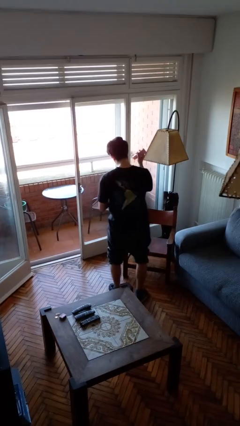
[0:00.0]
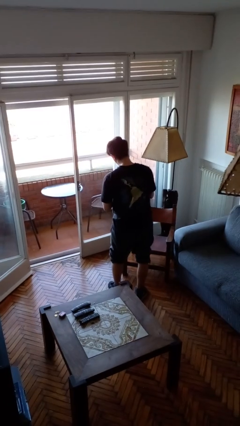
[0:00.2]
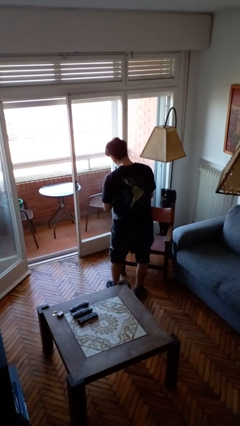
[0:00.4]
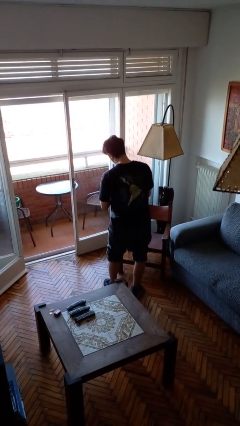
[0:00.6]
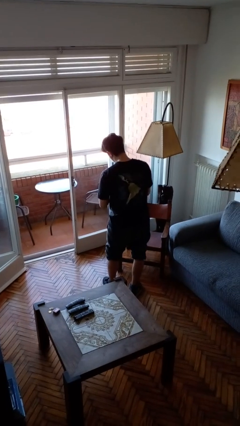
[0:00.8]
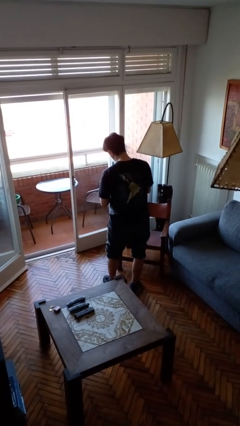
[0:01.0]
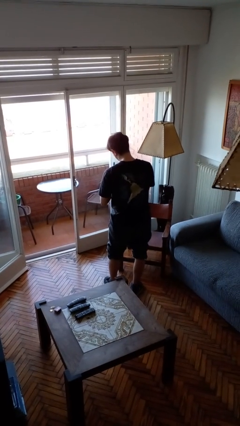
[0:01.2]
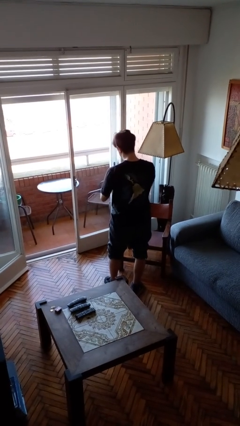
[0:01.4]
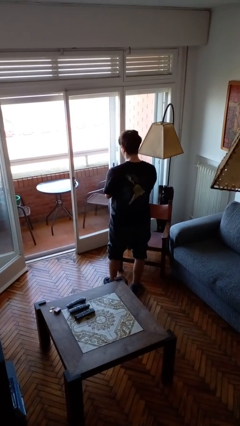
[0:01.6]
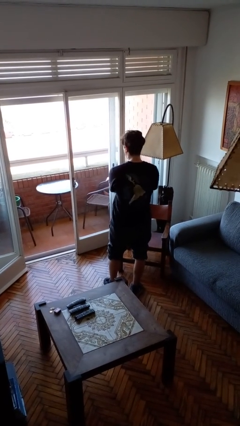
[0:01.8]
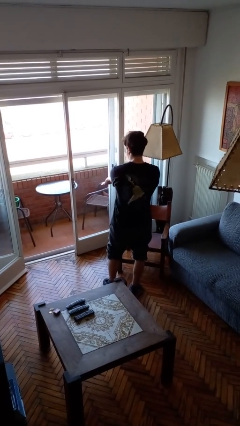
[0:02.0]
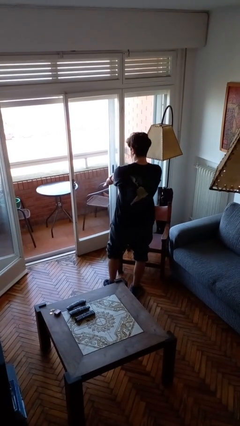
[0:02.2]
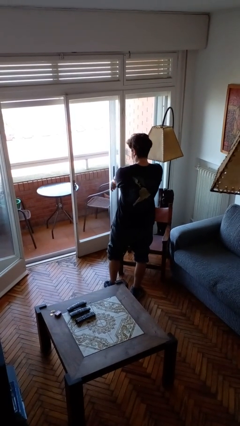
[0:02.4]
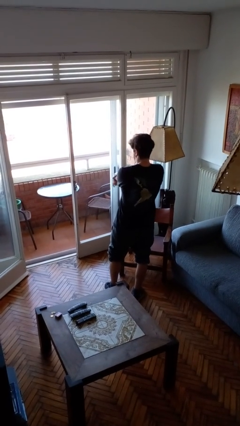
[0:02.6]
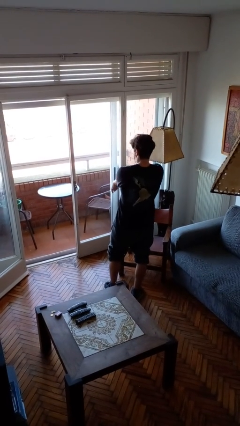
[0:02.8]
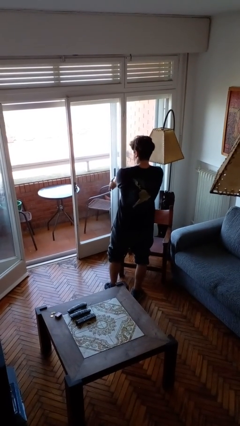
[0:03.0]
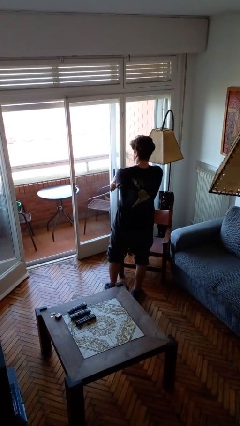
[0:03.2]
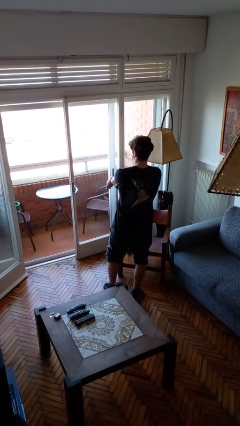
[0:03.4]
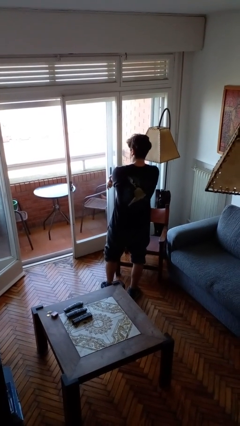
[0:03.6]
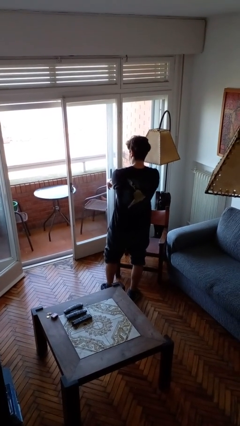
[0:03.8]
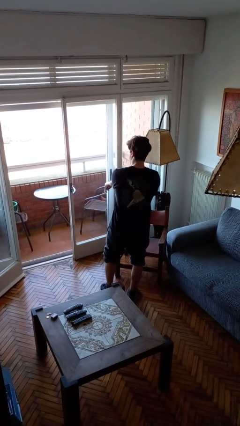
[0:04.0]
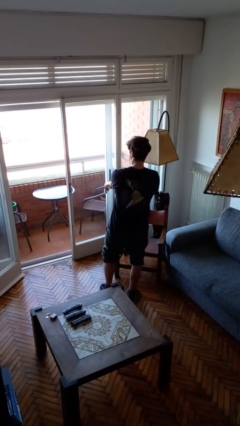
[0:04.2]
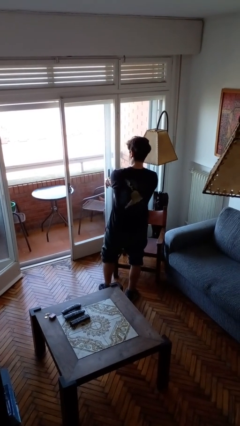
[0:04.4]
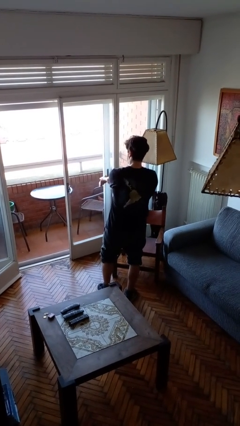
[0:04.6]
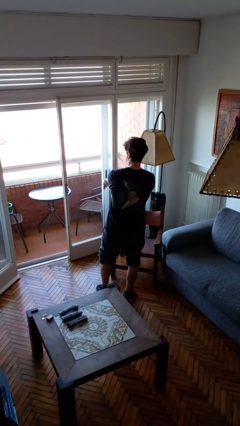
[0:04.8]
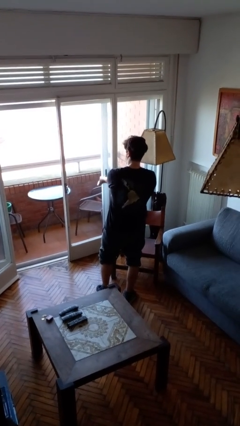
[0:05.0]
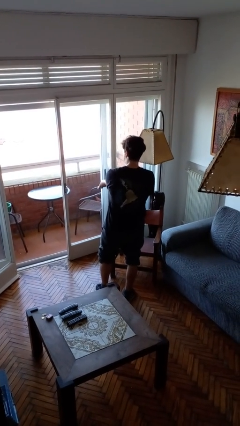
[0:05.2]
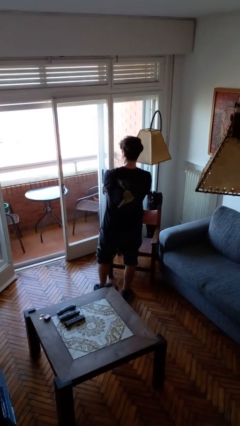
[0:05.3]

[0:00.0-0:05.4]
person applies sunscreen

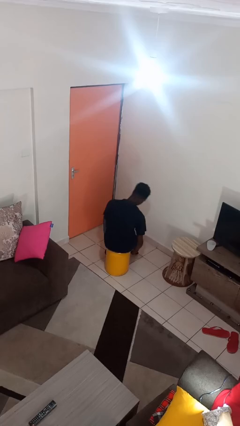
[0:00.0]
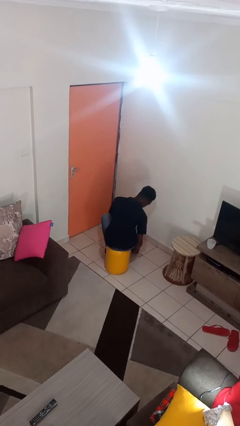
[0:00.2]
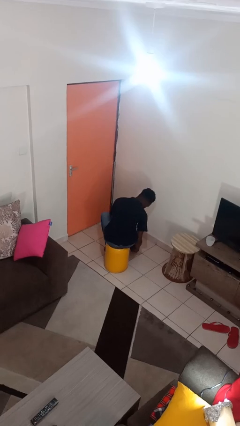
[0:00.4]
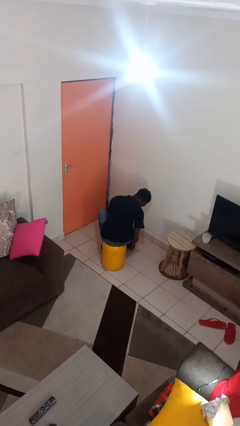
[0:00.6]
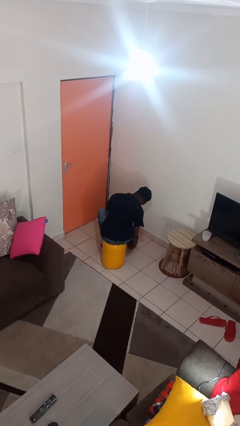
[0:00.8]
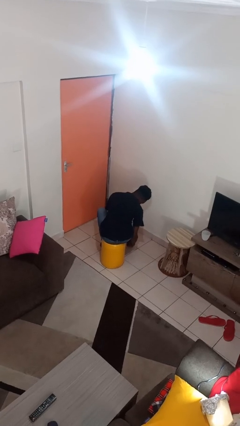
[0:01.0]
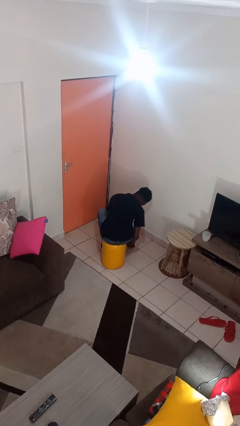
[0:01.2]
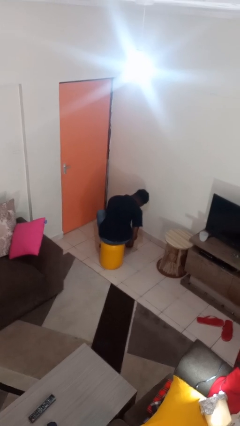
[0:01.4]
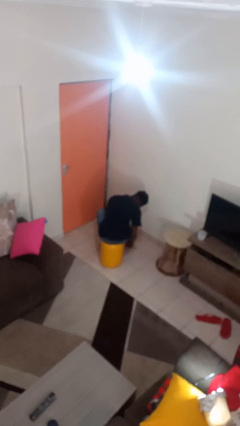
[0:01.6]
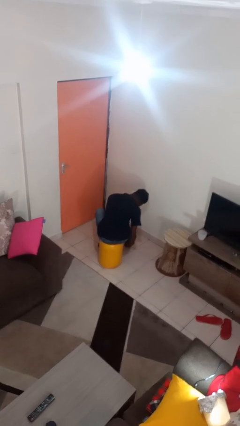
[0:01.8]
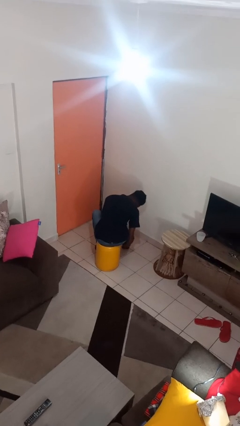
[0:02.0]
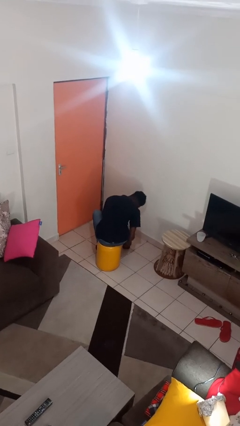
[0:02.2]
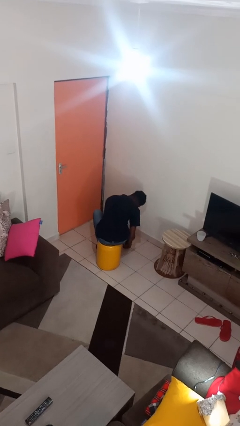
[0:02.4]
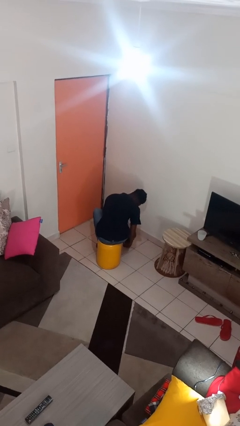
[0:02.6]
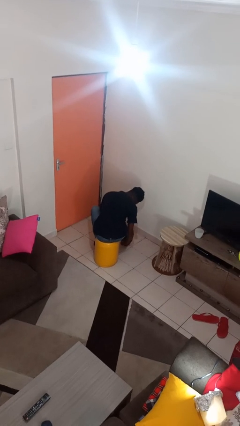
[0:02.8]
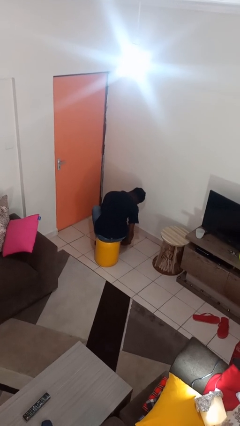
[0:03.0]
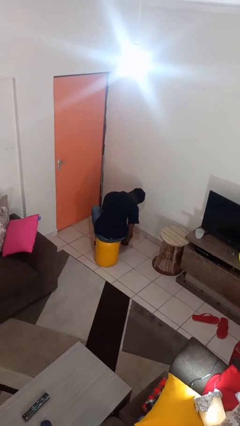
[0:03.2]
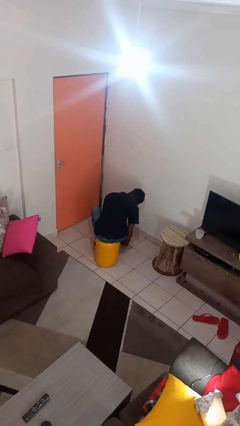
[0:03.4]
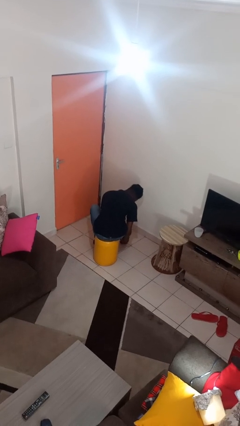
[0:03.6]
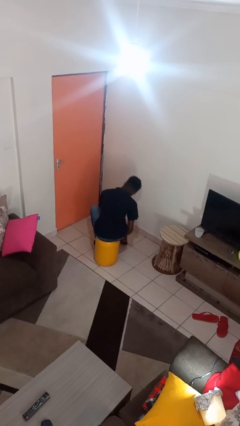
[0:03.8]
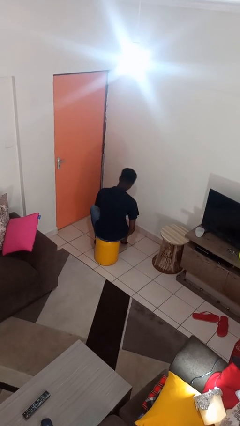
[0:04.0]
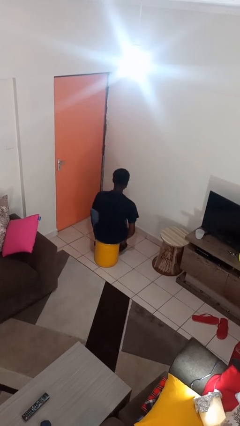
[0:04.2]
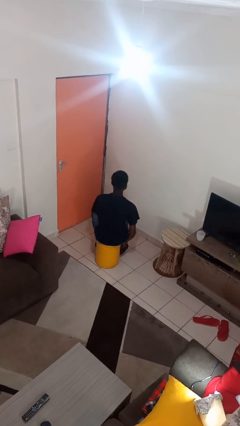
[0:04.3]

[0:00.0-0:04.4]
person rubs foot

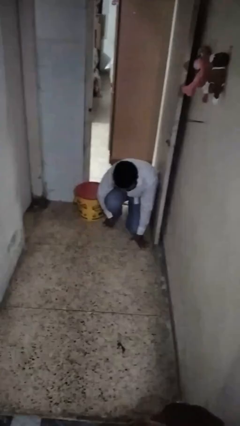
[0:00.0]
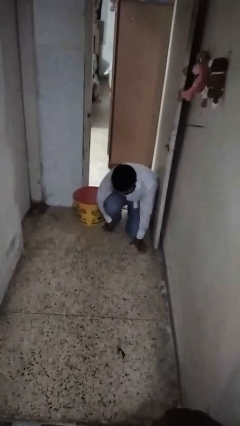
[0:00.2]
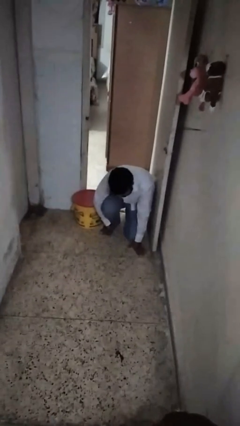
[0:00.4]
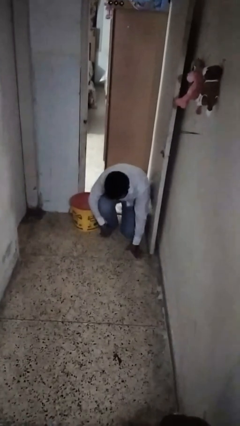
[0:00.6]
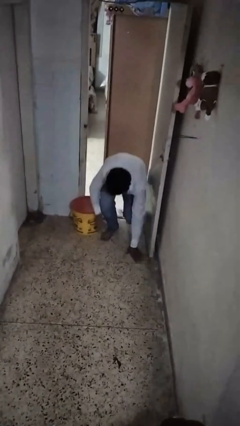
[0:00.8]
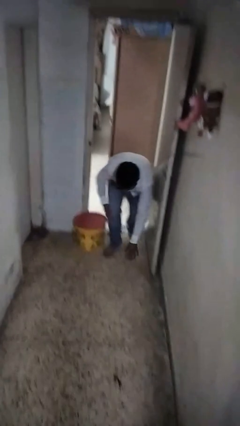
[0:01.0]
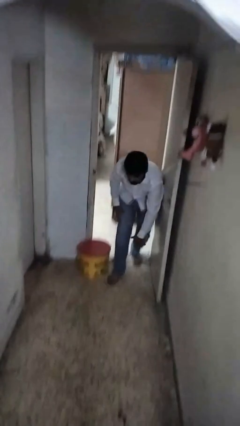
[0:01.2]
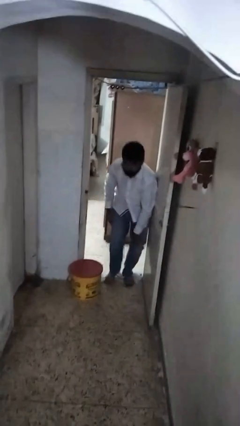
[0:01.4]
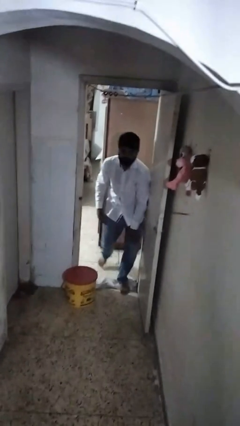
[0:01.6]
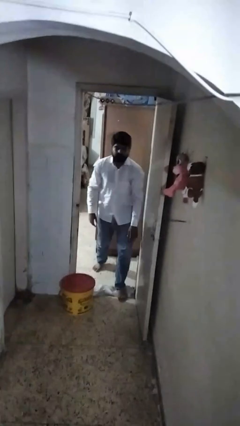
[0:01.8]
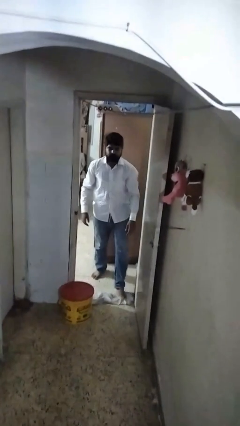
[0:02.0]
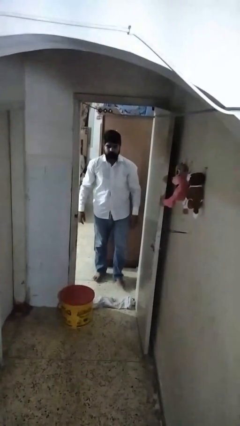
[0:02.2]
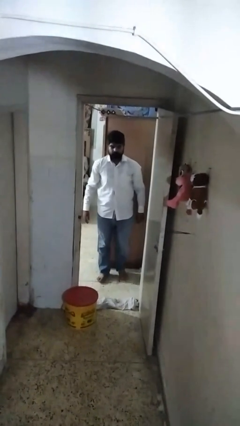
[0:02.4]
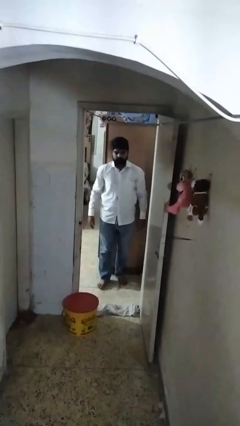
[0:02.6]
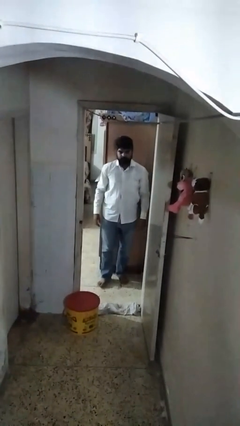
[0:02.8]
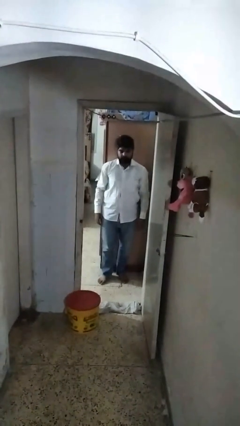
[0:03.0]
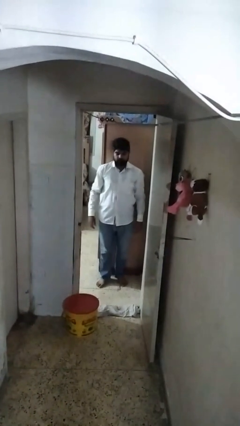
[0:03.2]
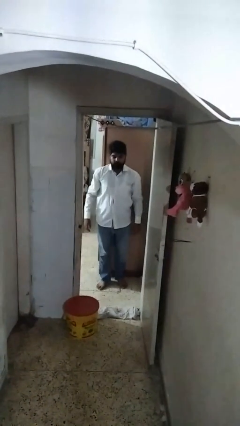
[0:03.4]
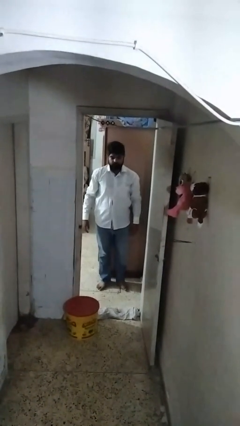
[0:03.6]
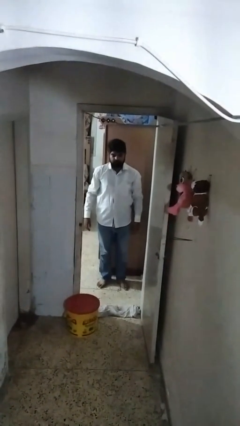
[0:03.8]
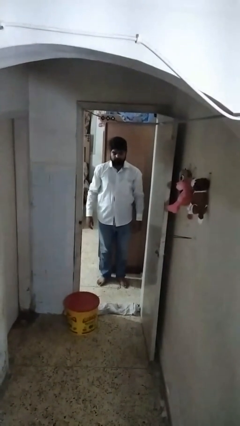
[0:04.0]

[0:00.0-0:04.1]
person stands up from floor

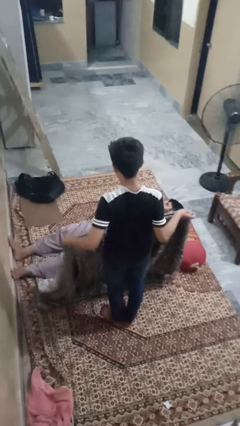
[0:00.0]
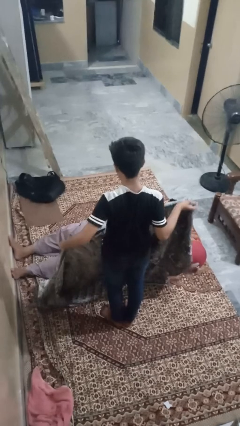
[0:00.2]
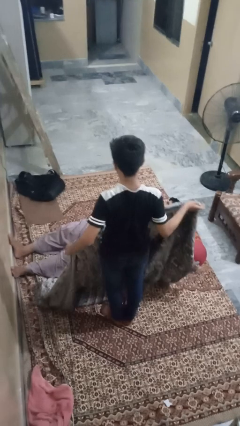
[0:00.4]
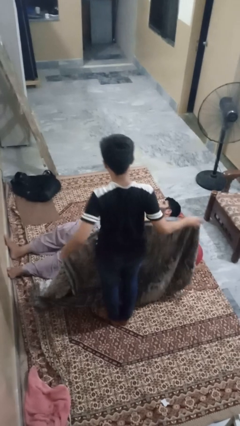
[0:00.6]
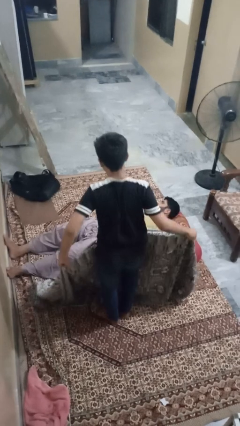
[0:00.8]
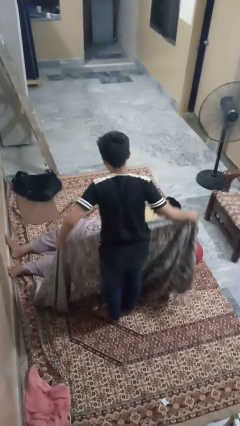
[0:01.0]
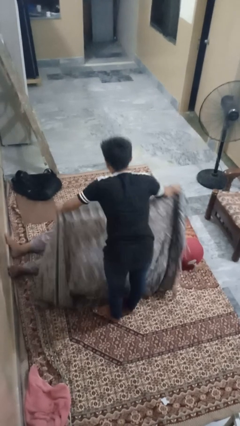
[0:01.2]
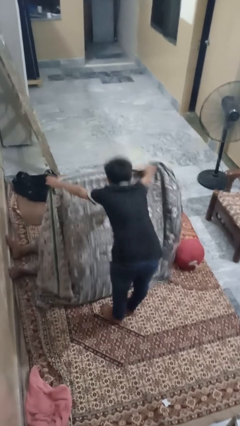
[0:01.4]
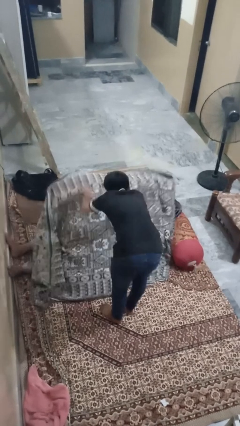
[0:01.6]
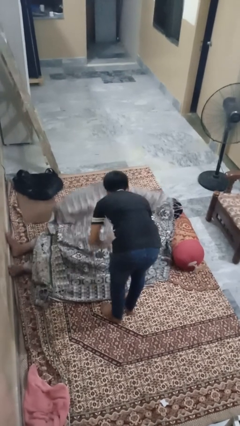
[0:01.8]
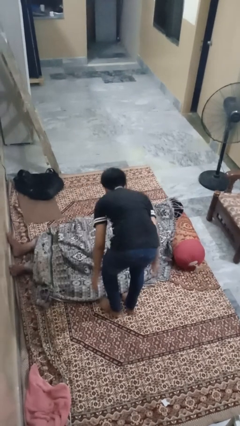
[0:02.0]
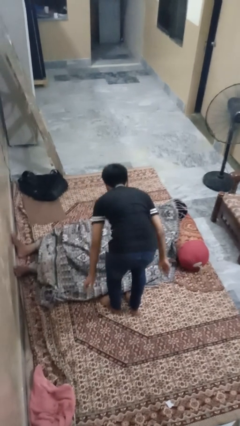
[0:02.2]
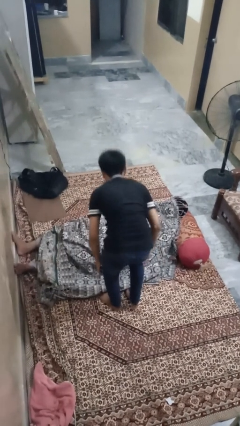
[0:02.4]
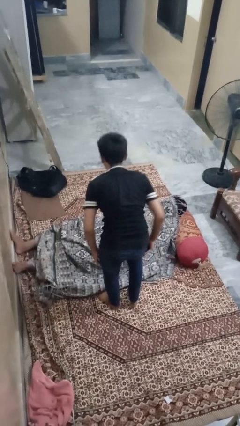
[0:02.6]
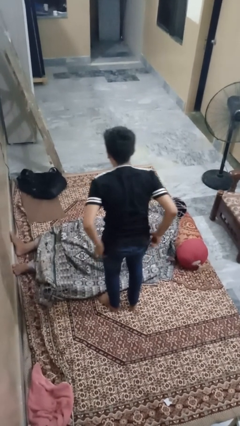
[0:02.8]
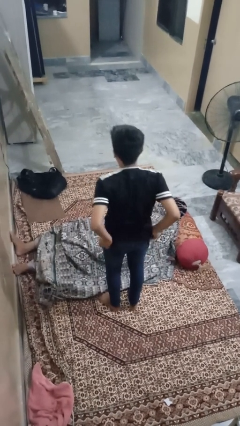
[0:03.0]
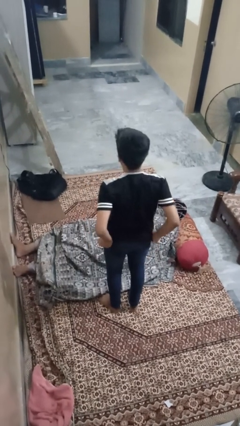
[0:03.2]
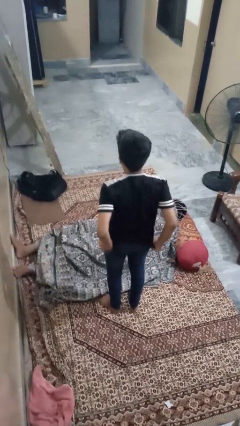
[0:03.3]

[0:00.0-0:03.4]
person covers friend with blanket

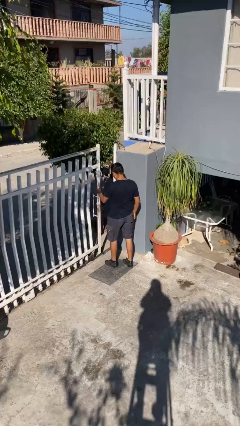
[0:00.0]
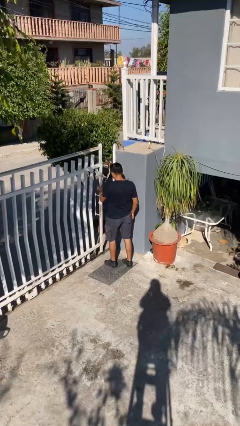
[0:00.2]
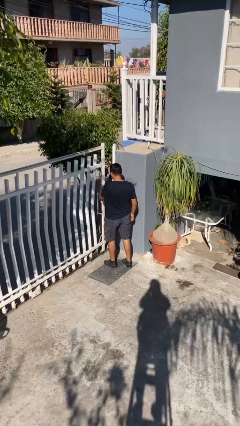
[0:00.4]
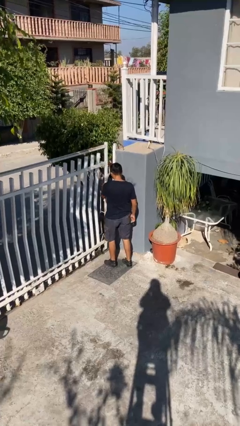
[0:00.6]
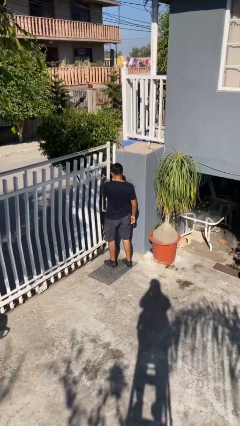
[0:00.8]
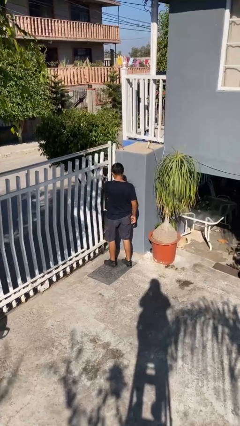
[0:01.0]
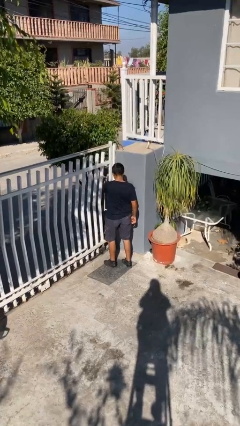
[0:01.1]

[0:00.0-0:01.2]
person closes facility door
